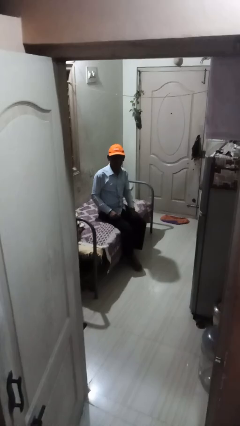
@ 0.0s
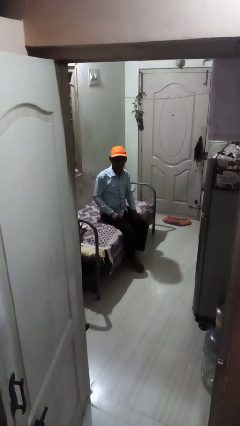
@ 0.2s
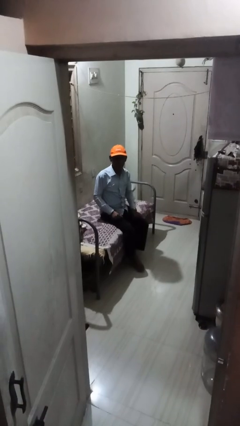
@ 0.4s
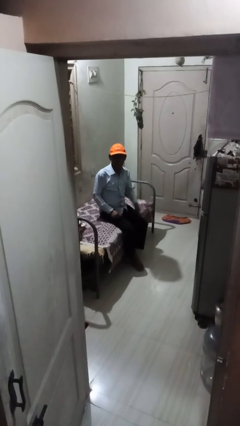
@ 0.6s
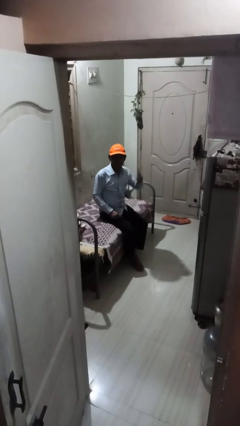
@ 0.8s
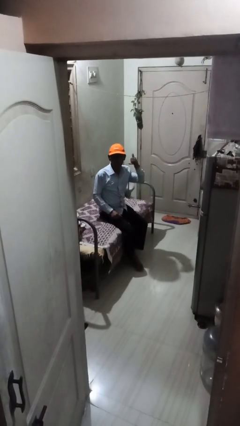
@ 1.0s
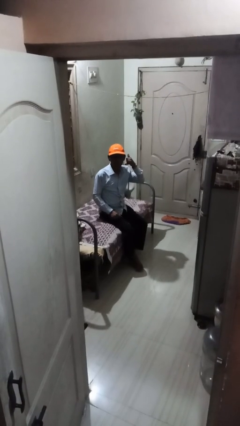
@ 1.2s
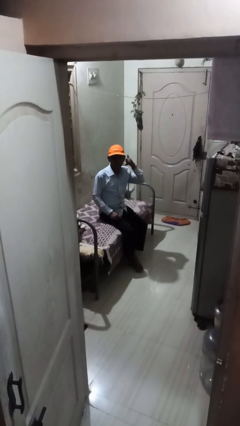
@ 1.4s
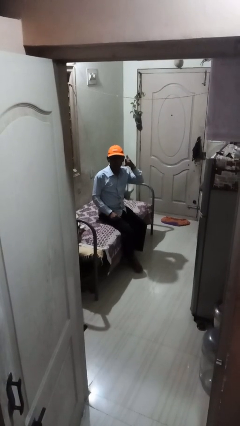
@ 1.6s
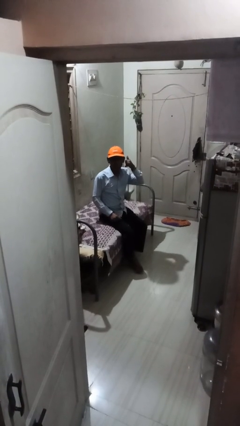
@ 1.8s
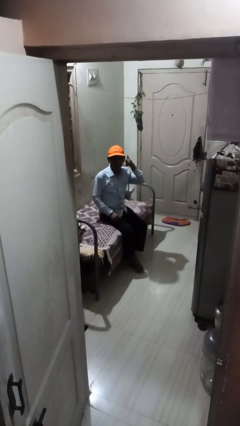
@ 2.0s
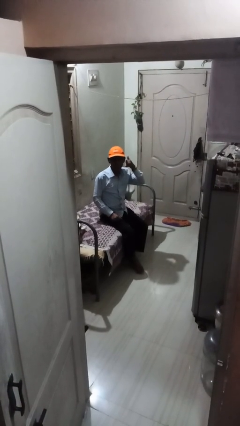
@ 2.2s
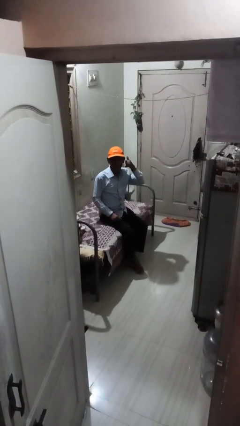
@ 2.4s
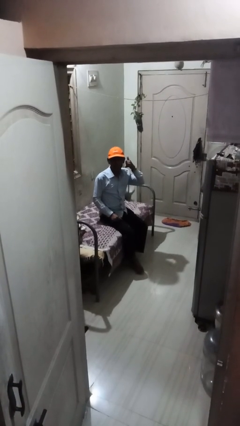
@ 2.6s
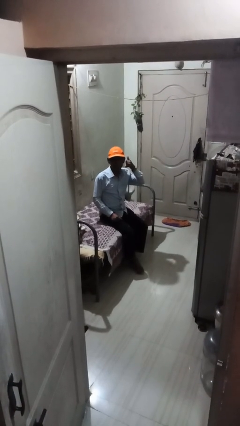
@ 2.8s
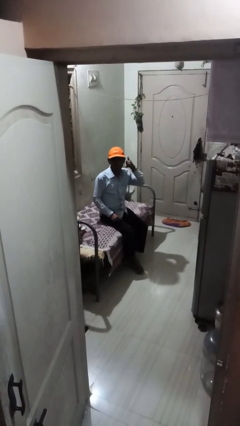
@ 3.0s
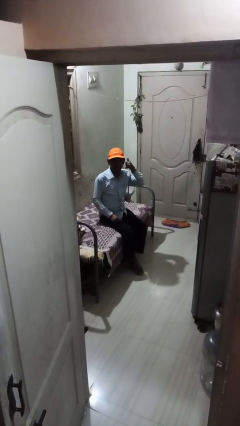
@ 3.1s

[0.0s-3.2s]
person gestures call me

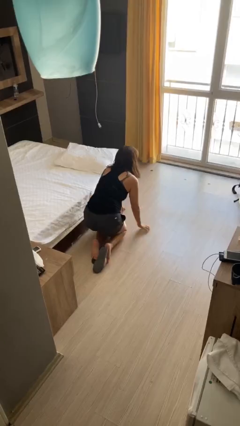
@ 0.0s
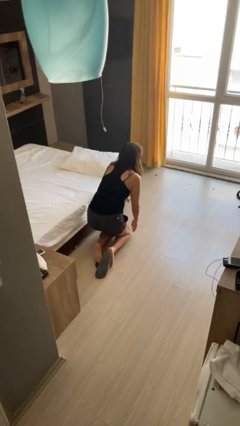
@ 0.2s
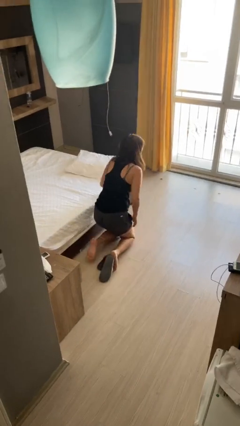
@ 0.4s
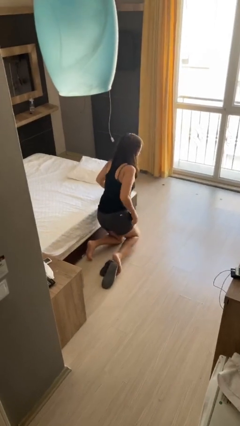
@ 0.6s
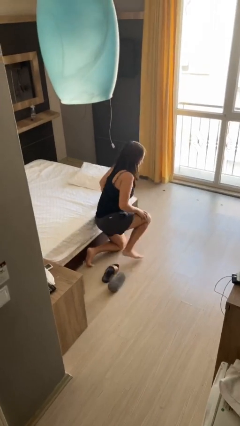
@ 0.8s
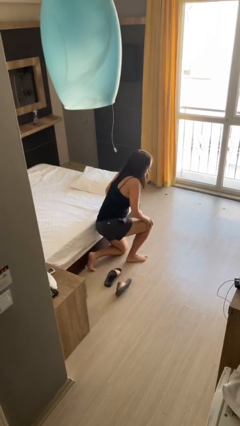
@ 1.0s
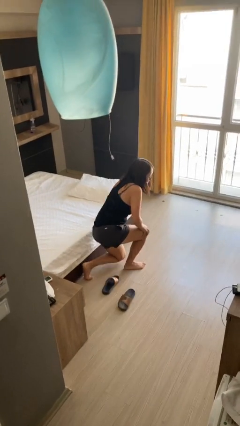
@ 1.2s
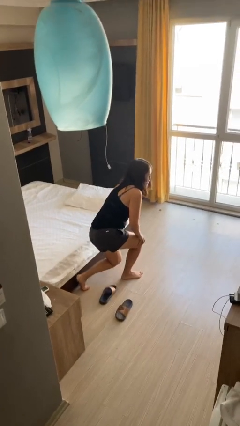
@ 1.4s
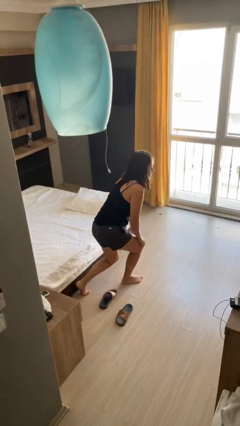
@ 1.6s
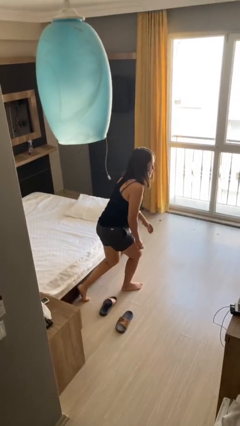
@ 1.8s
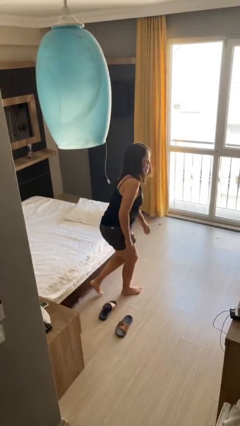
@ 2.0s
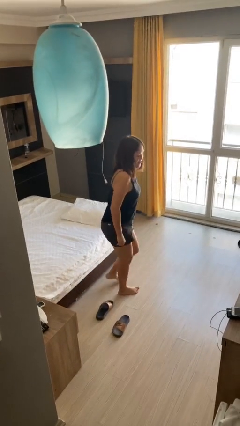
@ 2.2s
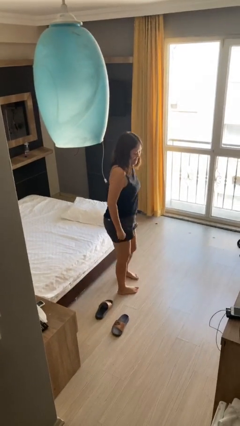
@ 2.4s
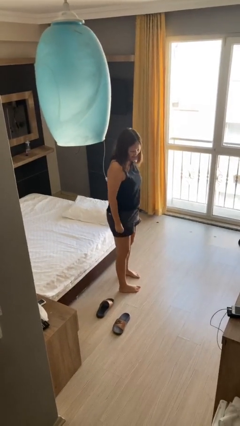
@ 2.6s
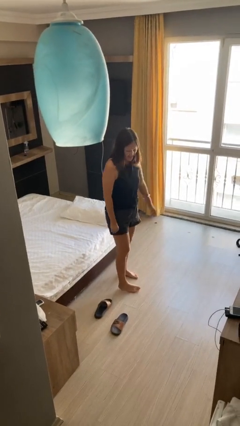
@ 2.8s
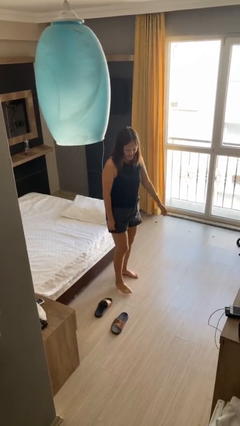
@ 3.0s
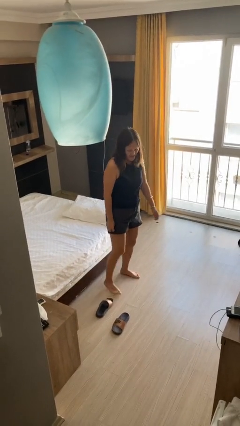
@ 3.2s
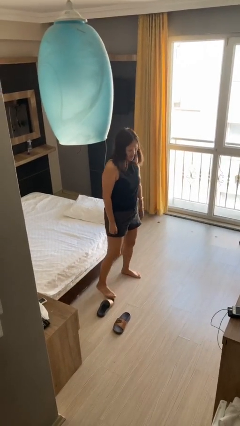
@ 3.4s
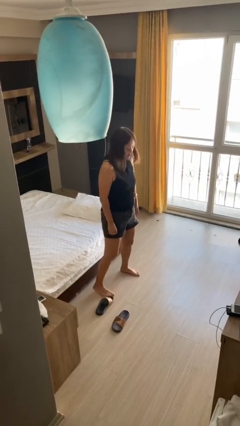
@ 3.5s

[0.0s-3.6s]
person stands up from floor

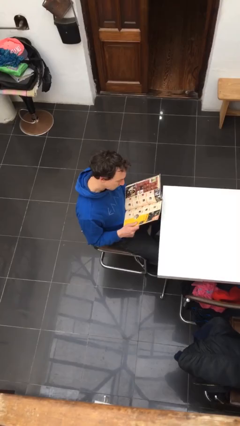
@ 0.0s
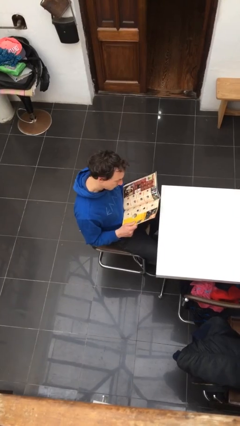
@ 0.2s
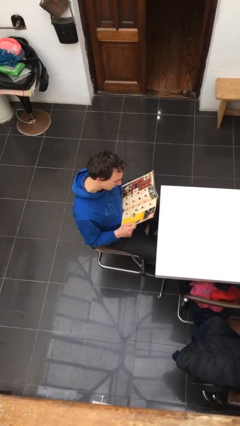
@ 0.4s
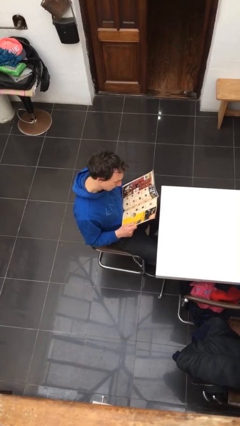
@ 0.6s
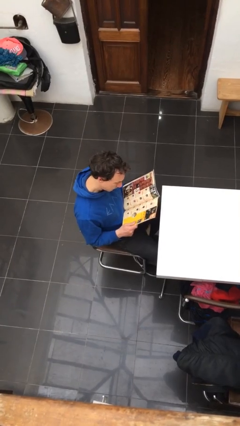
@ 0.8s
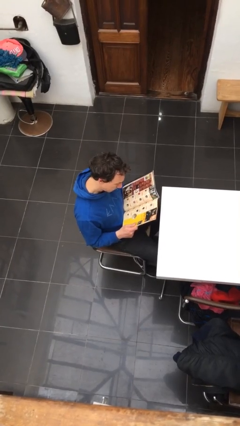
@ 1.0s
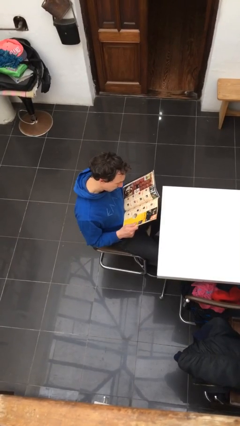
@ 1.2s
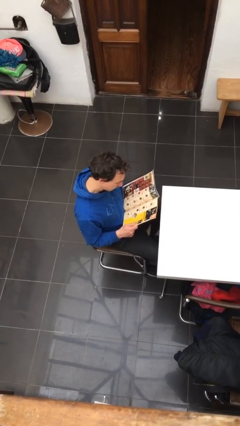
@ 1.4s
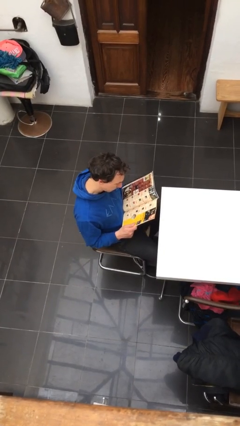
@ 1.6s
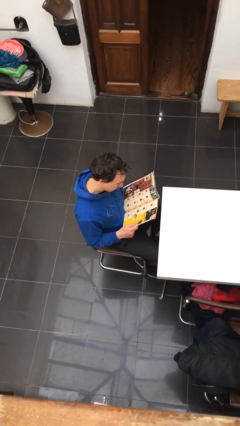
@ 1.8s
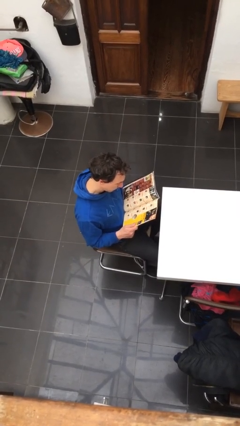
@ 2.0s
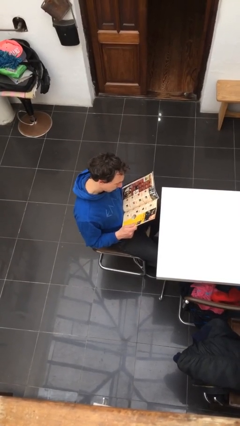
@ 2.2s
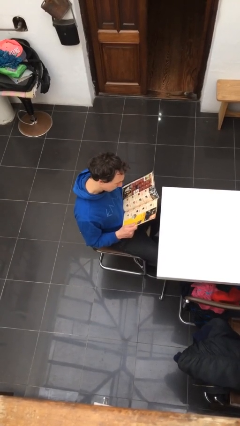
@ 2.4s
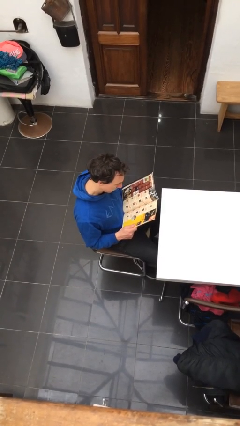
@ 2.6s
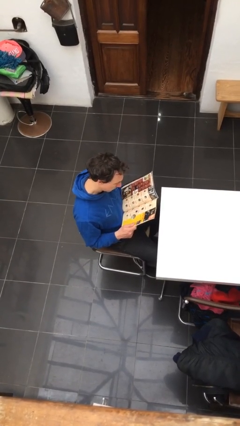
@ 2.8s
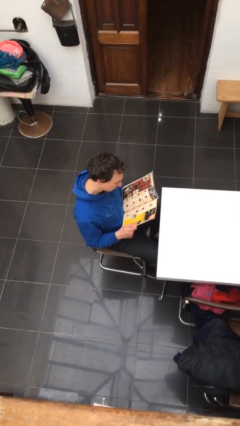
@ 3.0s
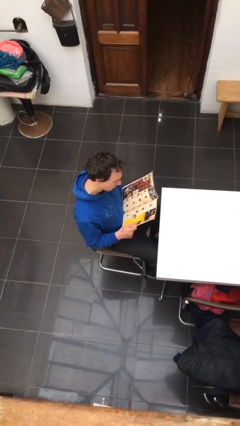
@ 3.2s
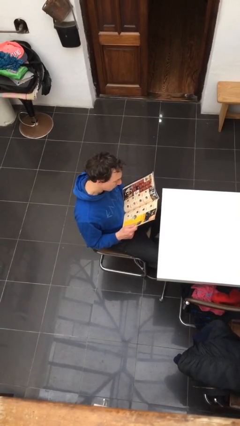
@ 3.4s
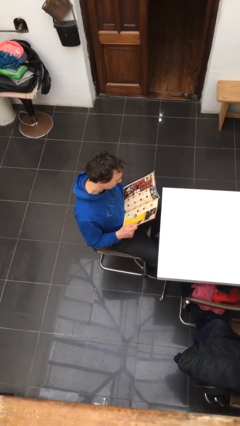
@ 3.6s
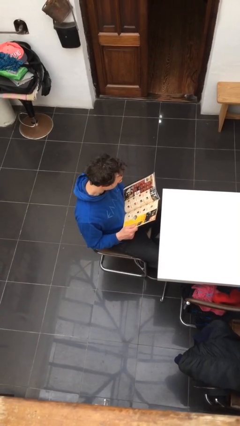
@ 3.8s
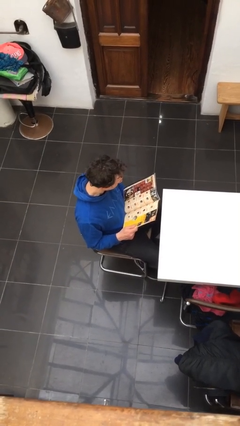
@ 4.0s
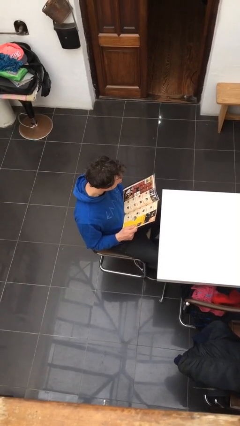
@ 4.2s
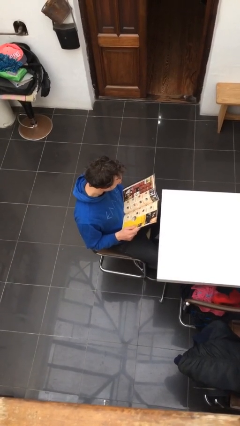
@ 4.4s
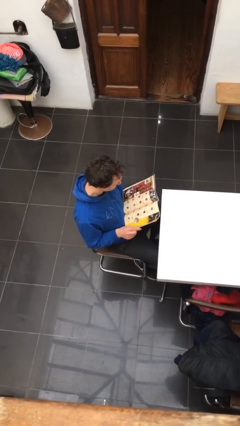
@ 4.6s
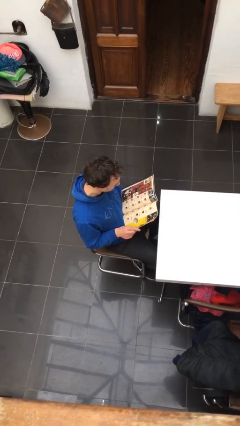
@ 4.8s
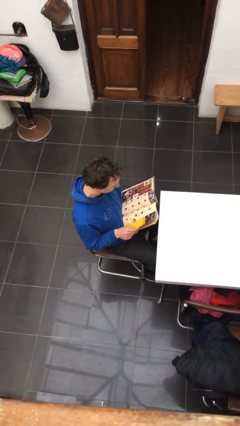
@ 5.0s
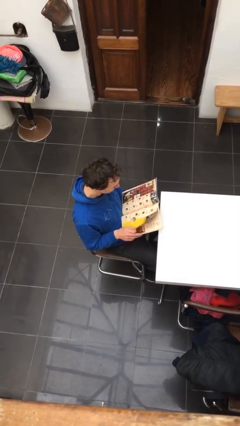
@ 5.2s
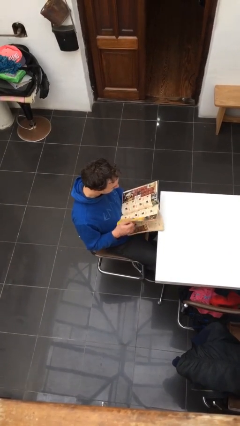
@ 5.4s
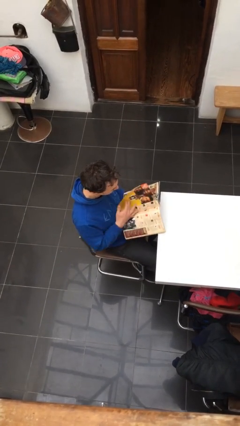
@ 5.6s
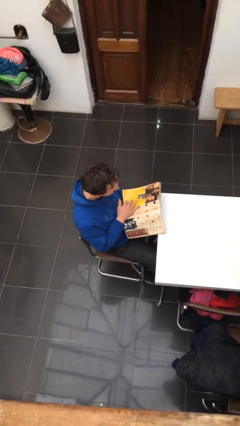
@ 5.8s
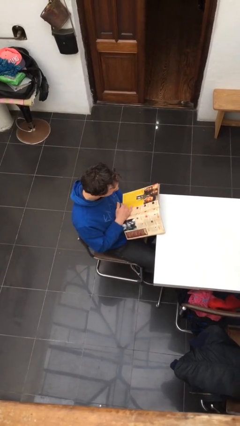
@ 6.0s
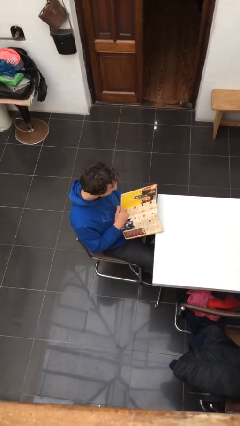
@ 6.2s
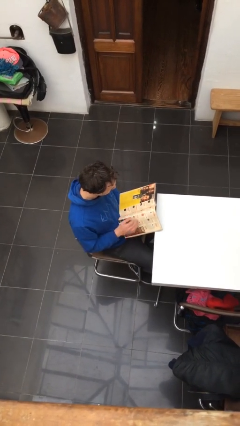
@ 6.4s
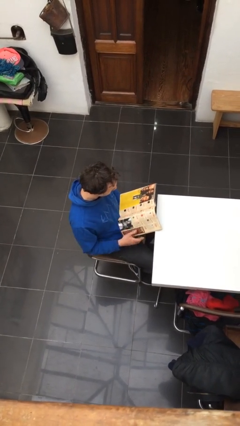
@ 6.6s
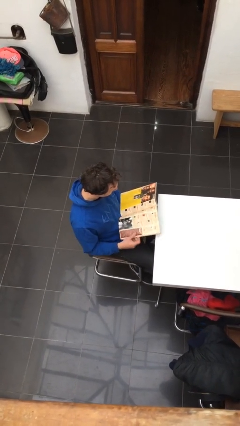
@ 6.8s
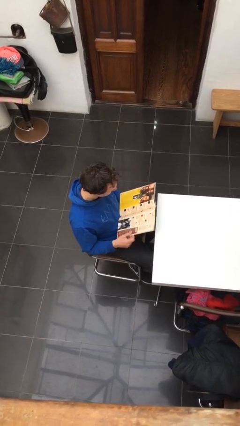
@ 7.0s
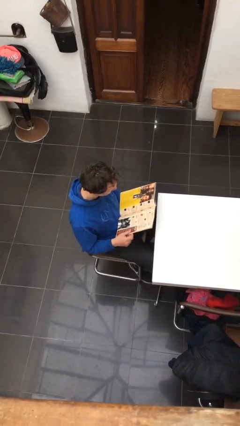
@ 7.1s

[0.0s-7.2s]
person reads document

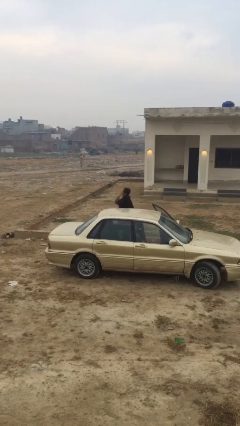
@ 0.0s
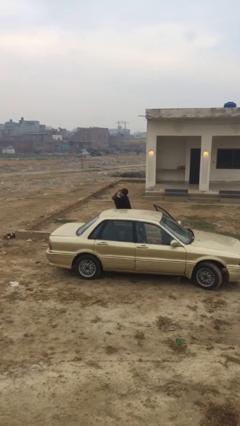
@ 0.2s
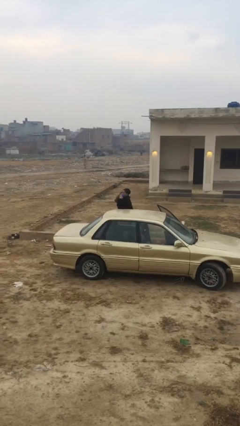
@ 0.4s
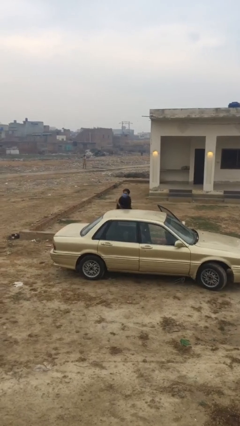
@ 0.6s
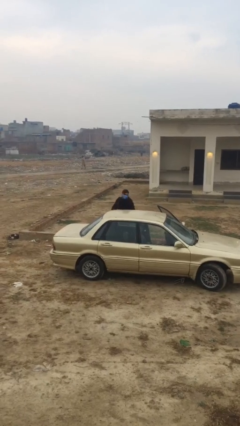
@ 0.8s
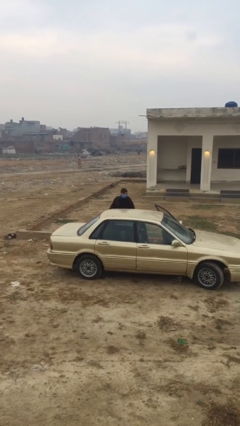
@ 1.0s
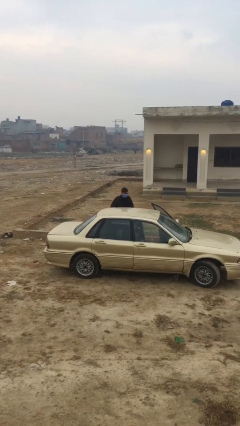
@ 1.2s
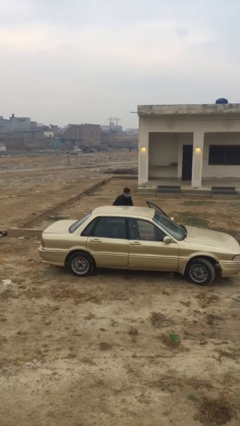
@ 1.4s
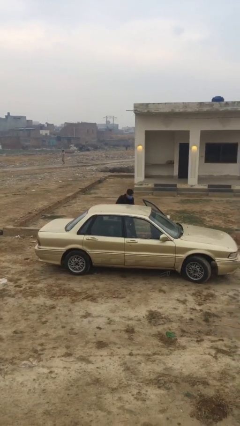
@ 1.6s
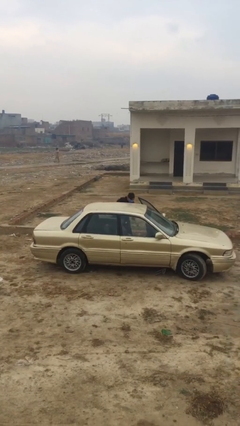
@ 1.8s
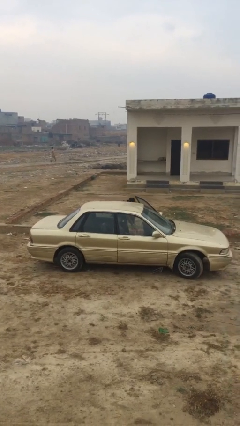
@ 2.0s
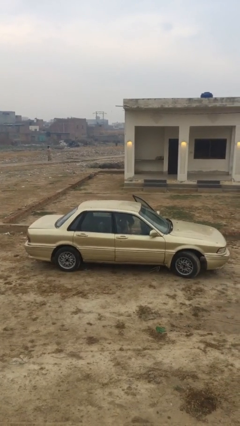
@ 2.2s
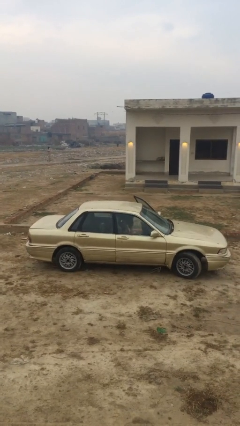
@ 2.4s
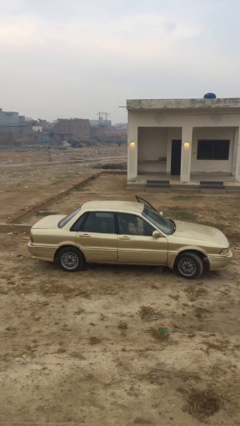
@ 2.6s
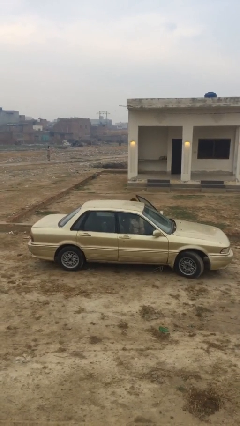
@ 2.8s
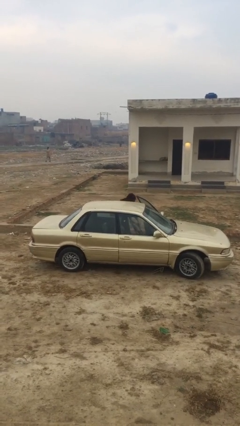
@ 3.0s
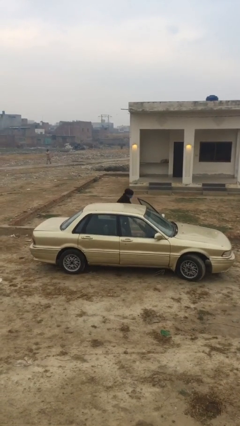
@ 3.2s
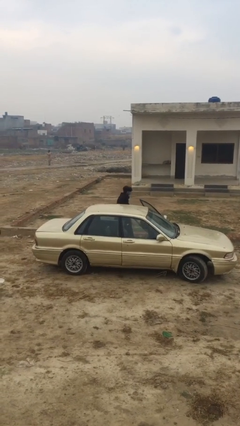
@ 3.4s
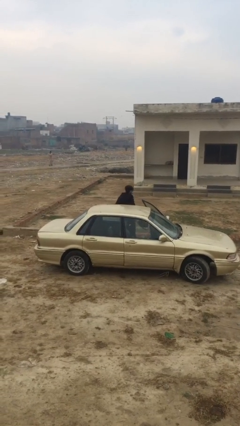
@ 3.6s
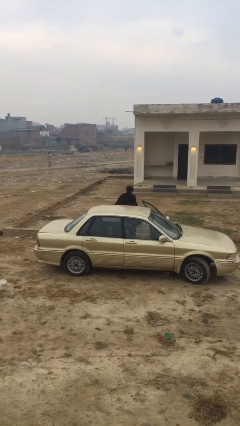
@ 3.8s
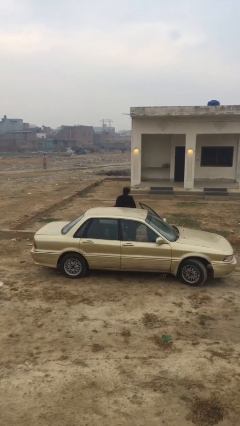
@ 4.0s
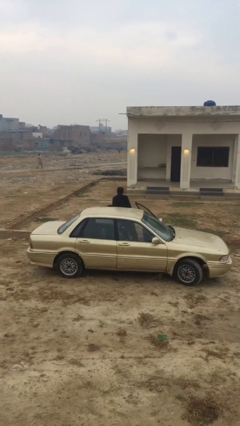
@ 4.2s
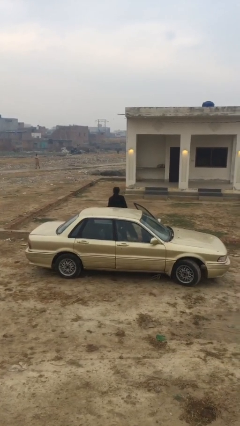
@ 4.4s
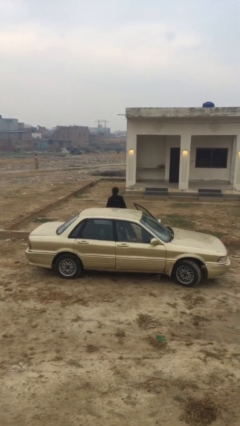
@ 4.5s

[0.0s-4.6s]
person unloads car
